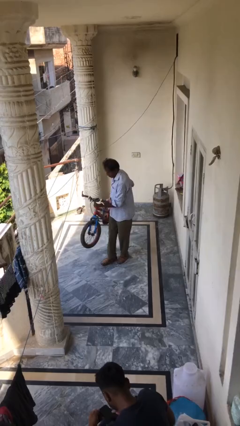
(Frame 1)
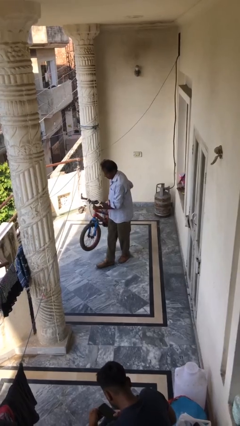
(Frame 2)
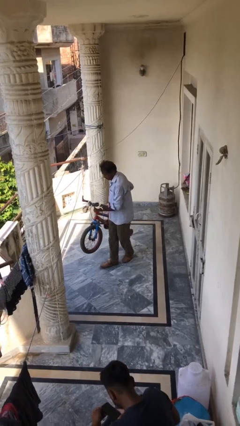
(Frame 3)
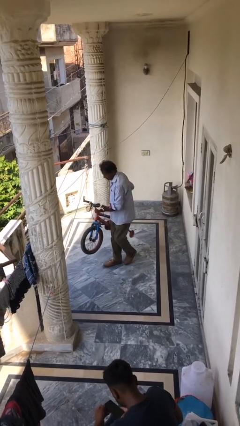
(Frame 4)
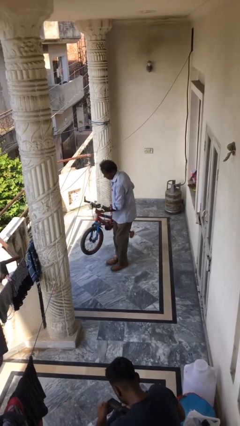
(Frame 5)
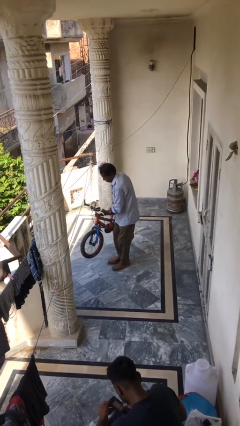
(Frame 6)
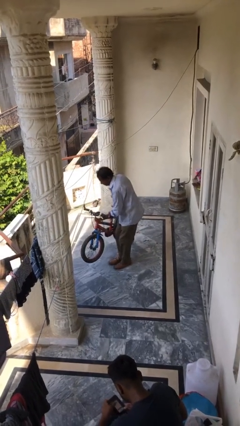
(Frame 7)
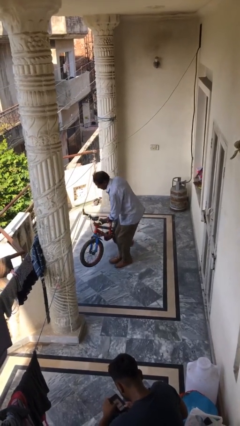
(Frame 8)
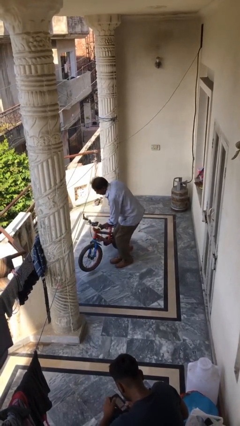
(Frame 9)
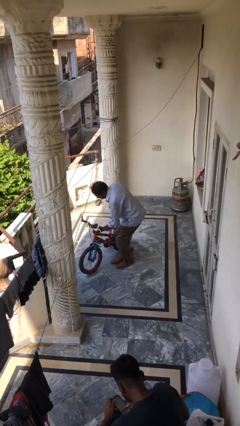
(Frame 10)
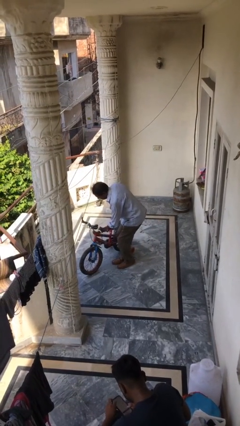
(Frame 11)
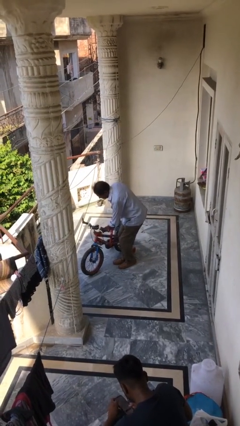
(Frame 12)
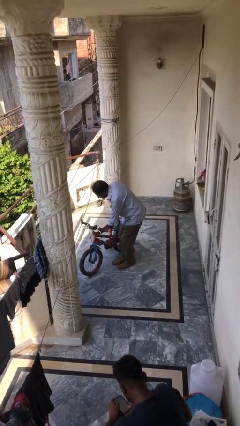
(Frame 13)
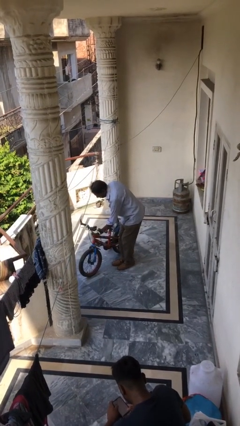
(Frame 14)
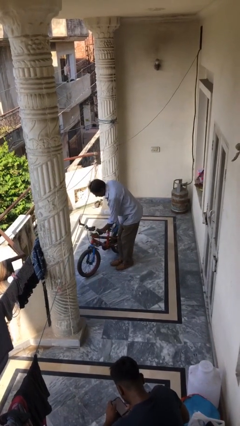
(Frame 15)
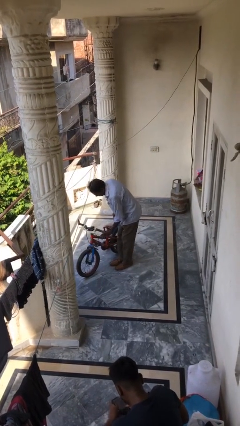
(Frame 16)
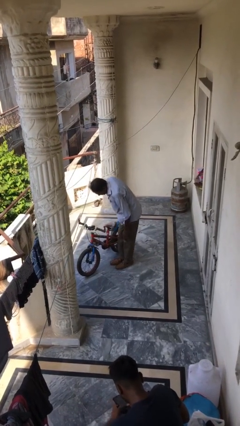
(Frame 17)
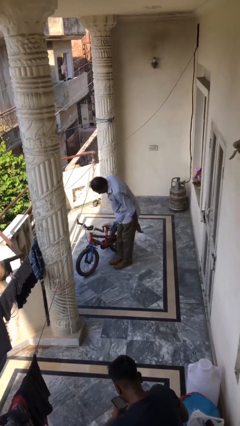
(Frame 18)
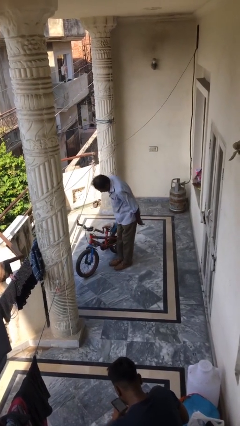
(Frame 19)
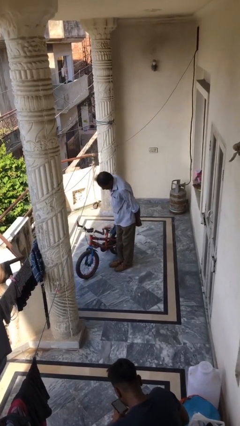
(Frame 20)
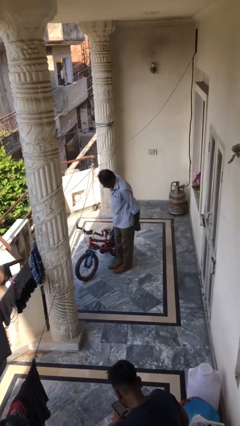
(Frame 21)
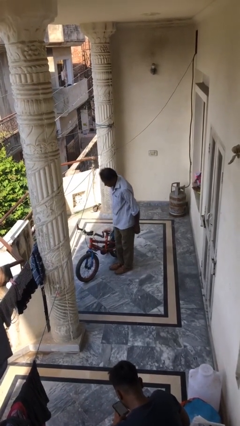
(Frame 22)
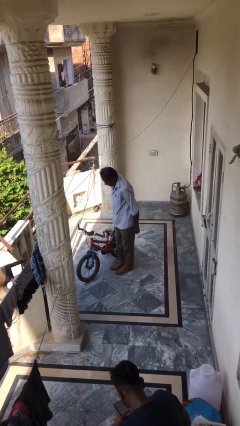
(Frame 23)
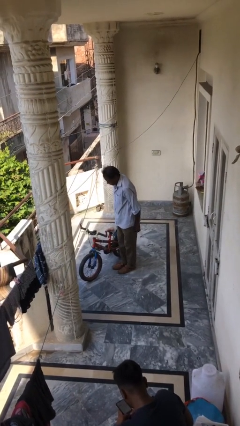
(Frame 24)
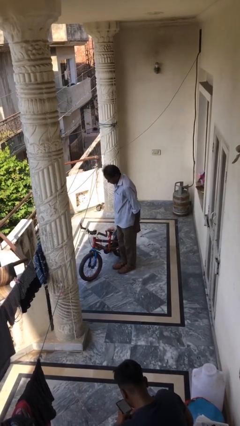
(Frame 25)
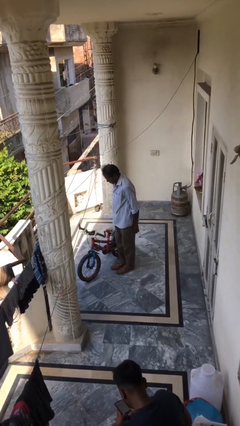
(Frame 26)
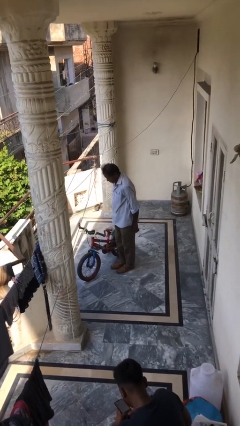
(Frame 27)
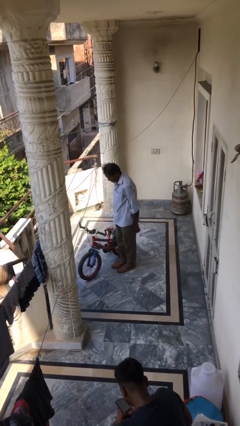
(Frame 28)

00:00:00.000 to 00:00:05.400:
person puts down object on floor

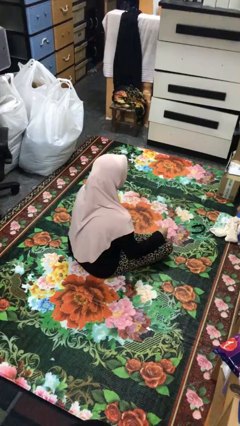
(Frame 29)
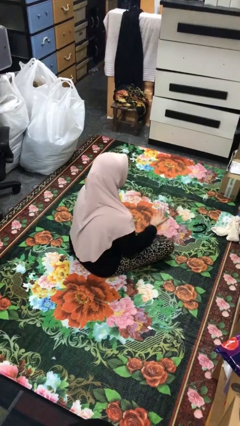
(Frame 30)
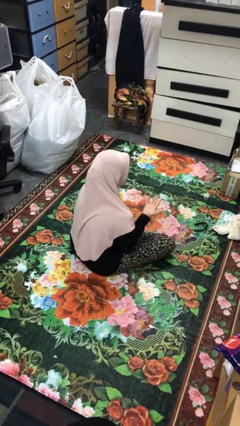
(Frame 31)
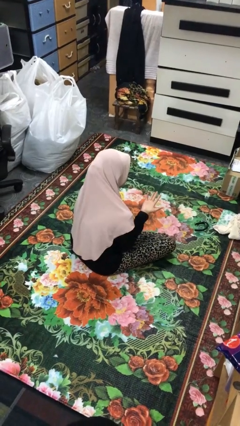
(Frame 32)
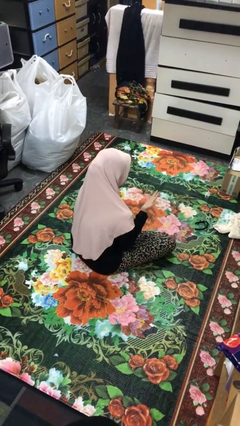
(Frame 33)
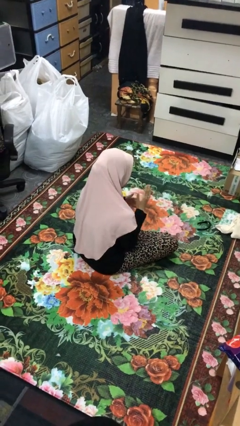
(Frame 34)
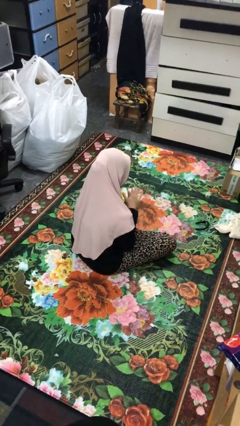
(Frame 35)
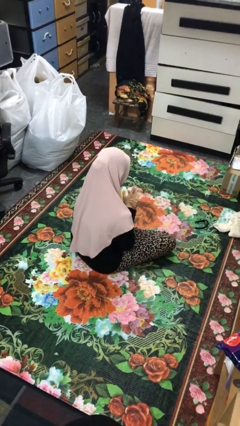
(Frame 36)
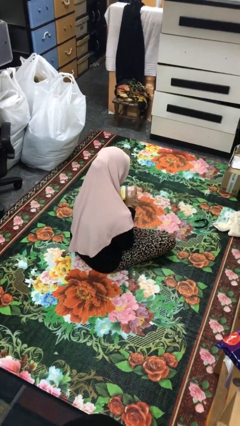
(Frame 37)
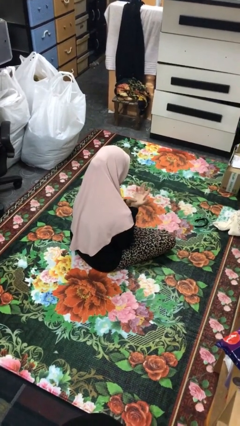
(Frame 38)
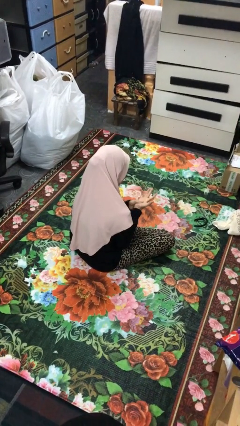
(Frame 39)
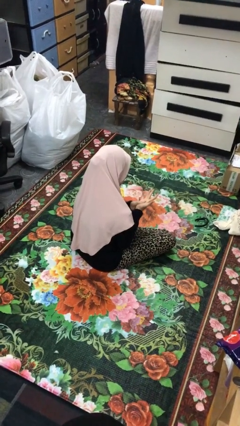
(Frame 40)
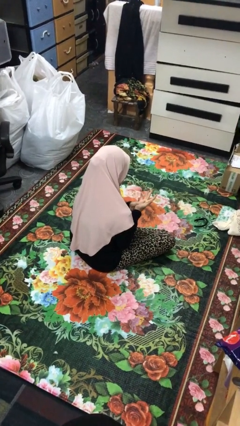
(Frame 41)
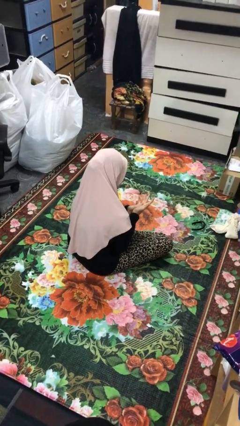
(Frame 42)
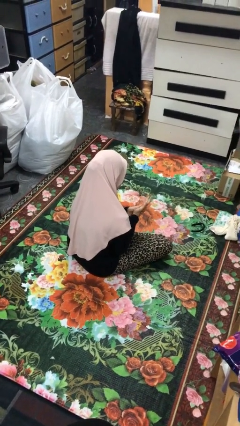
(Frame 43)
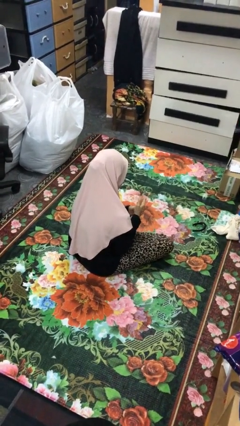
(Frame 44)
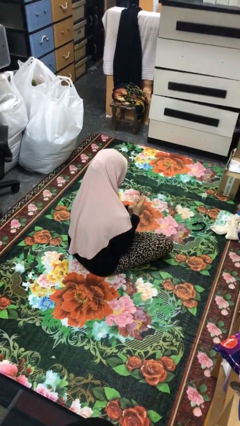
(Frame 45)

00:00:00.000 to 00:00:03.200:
person looks at hands in lap

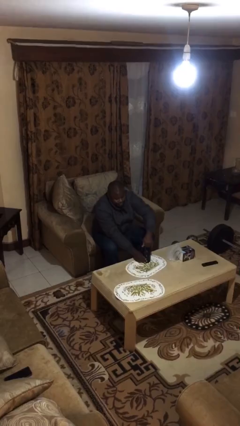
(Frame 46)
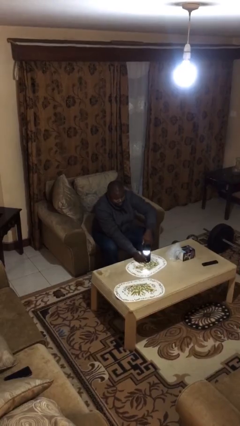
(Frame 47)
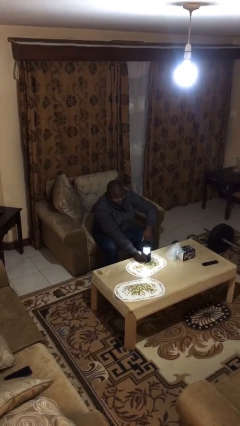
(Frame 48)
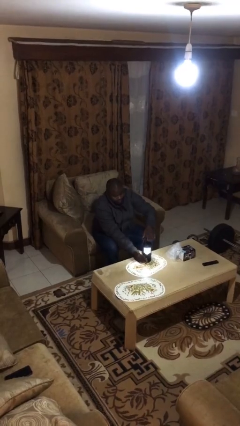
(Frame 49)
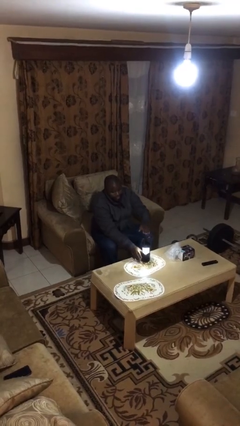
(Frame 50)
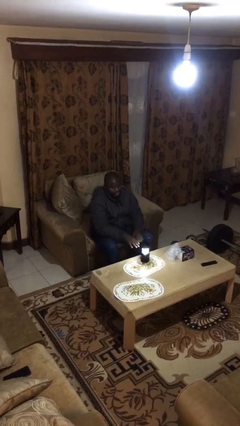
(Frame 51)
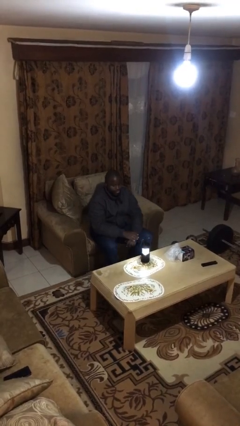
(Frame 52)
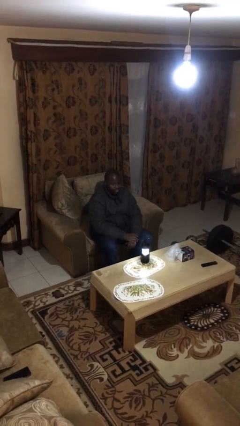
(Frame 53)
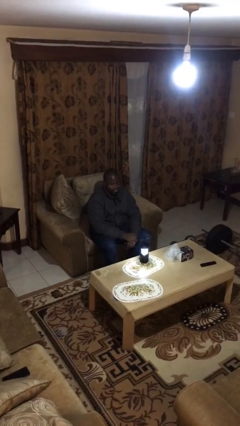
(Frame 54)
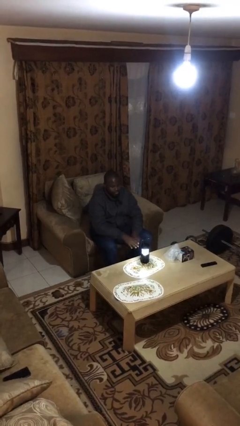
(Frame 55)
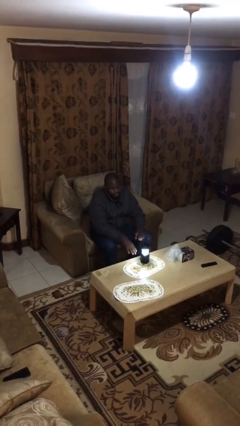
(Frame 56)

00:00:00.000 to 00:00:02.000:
person turns on lamp

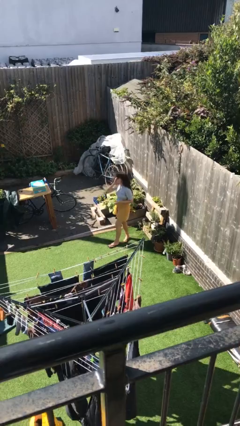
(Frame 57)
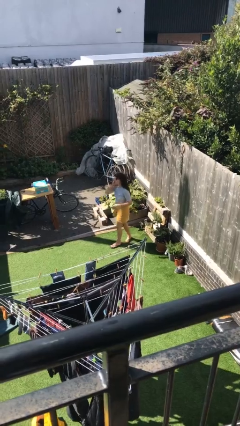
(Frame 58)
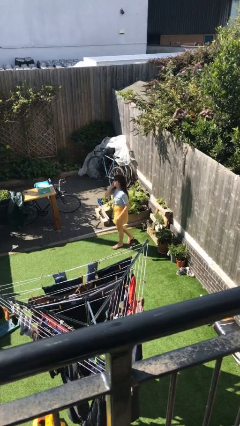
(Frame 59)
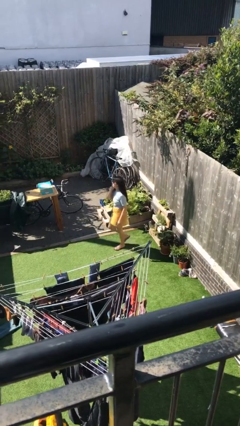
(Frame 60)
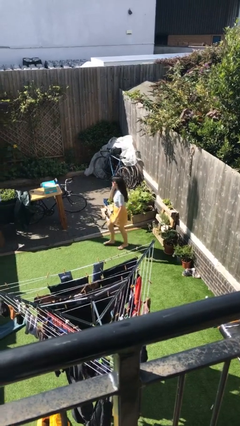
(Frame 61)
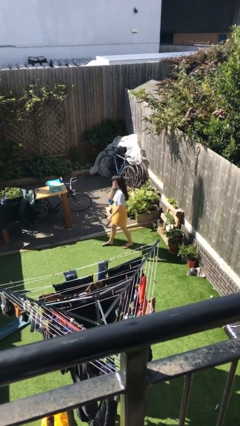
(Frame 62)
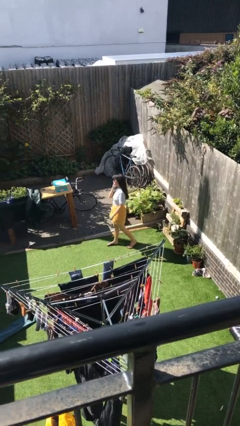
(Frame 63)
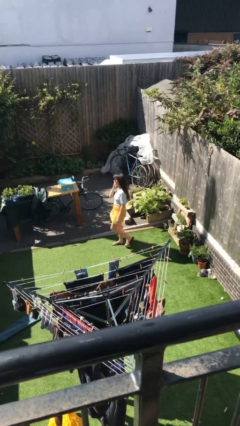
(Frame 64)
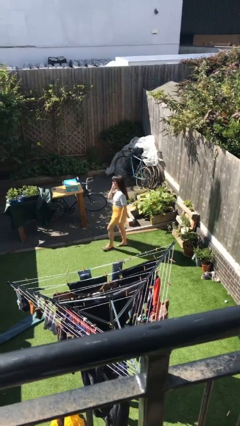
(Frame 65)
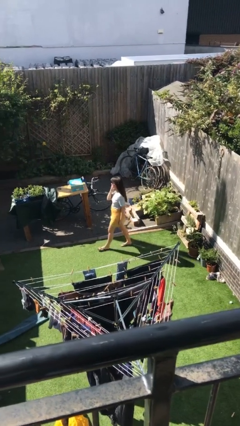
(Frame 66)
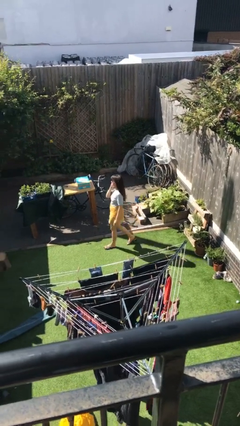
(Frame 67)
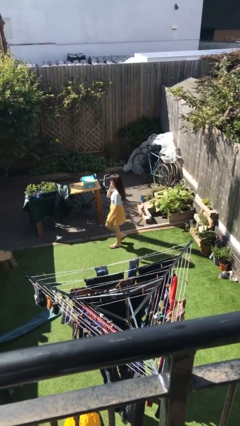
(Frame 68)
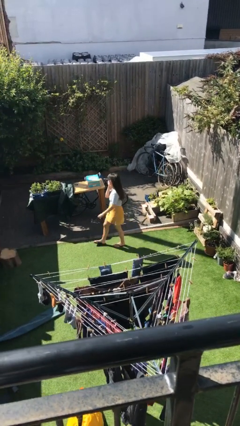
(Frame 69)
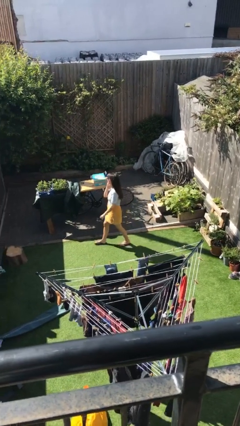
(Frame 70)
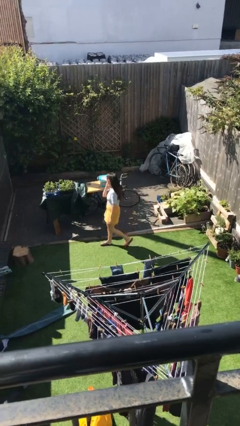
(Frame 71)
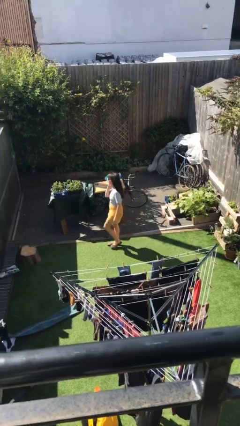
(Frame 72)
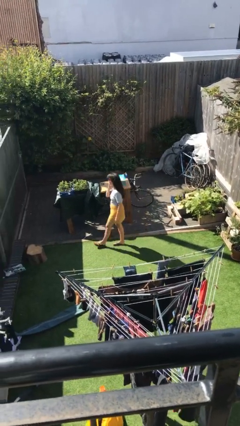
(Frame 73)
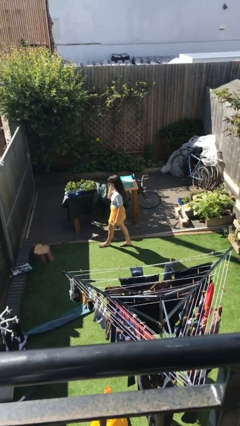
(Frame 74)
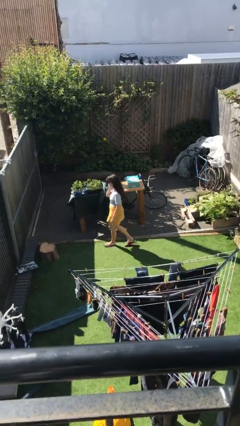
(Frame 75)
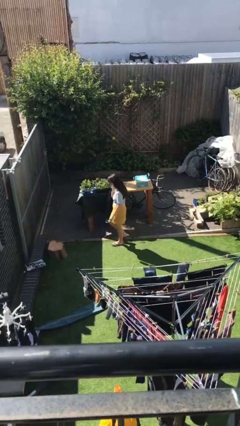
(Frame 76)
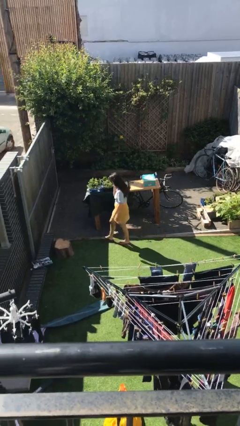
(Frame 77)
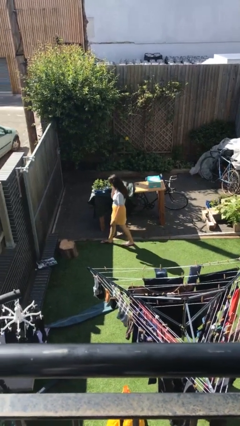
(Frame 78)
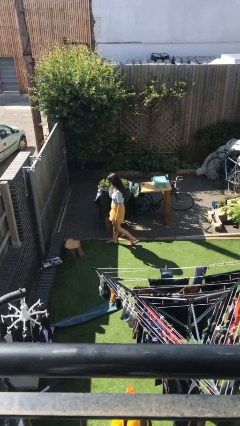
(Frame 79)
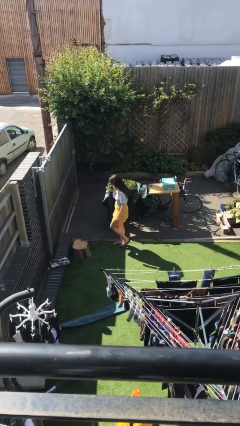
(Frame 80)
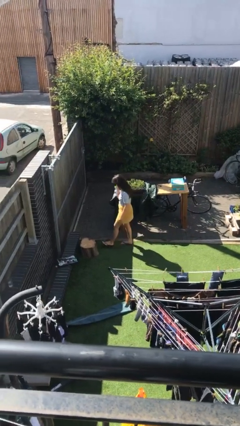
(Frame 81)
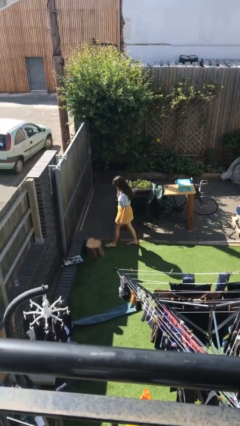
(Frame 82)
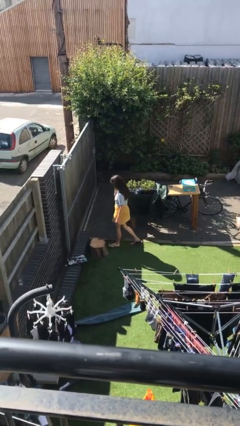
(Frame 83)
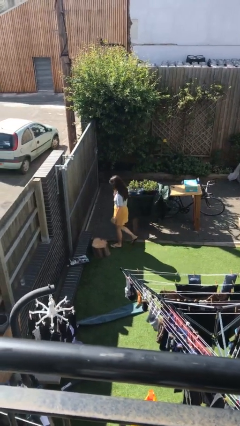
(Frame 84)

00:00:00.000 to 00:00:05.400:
person talks on phone

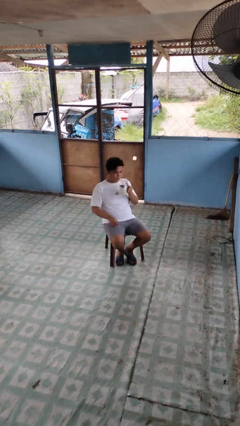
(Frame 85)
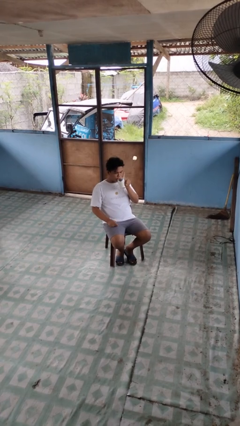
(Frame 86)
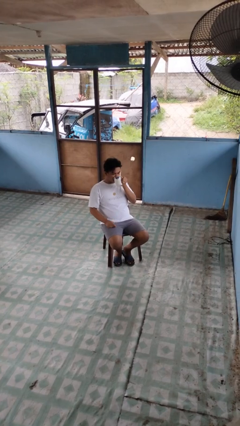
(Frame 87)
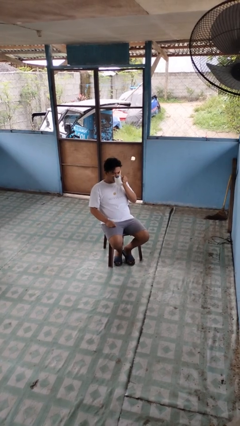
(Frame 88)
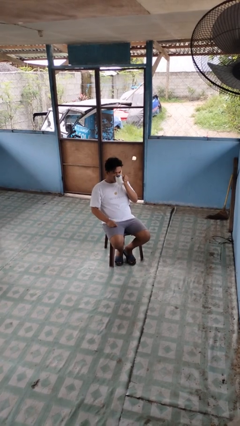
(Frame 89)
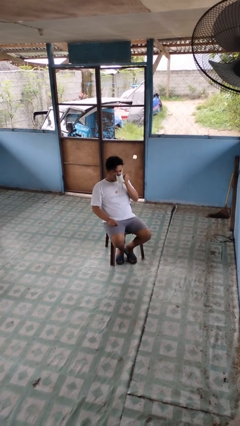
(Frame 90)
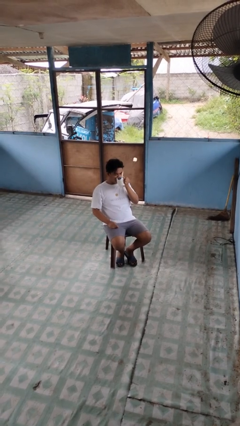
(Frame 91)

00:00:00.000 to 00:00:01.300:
person drinks from mug
